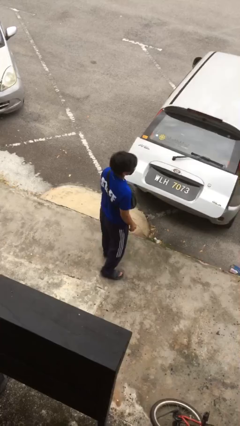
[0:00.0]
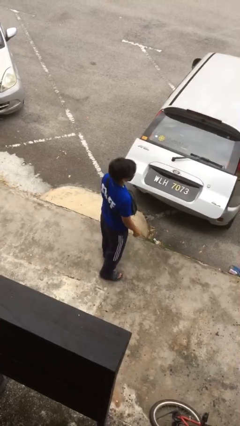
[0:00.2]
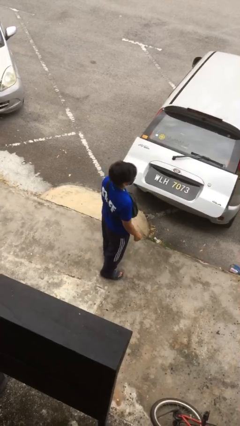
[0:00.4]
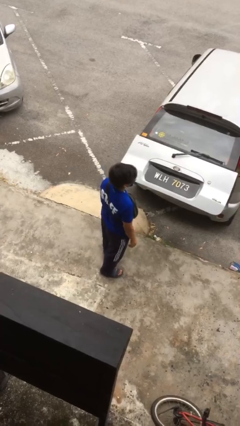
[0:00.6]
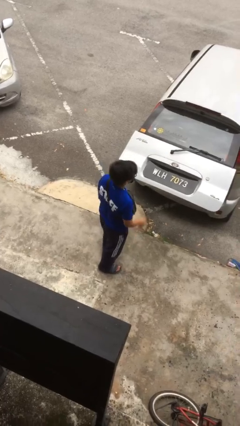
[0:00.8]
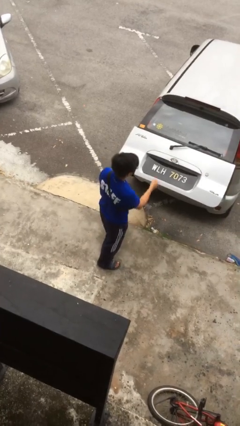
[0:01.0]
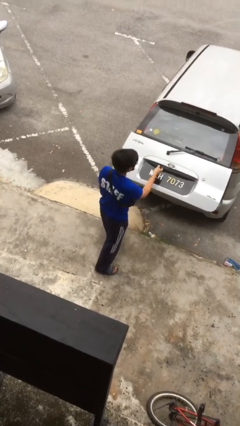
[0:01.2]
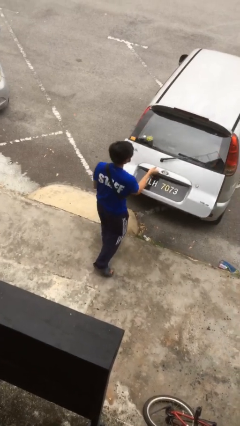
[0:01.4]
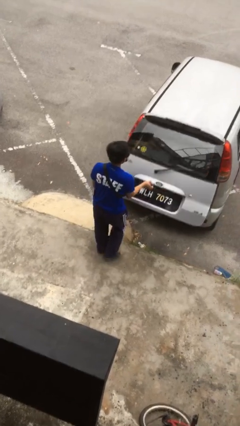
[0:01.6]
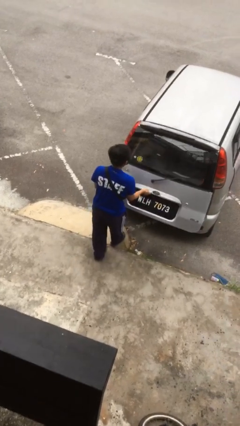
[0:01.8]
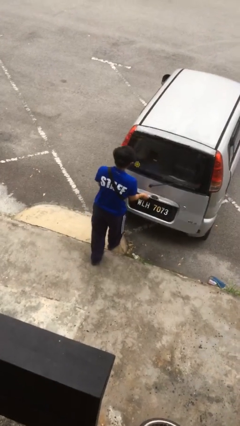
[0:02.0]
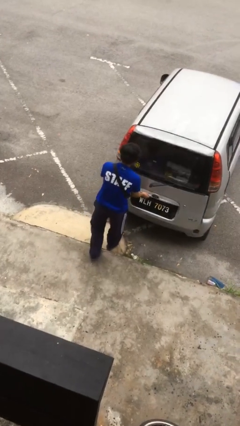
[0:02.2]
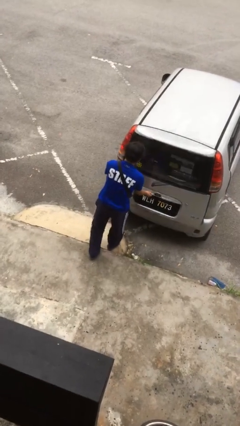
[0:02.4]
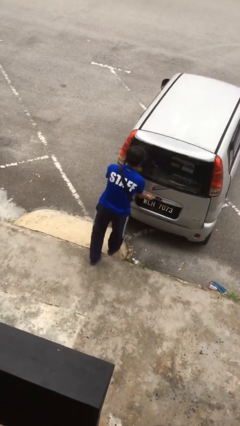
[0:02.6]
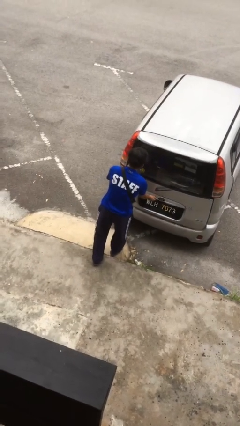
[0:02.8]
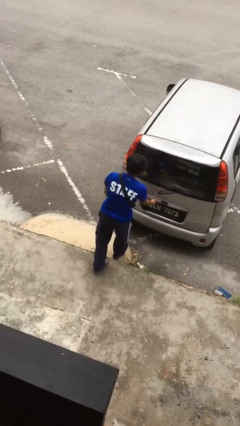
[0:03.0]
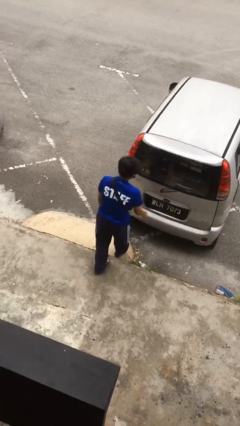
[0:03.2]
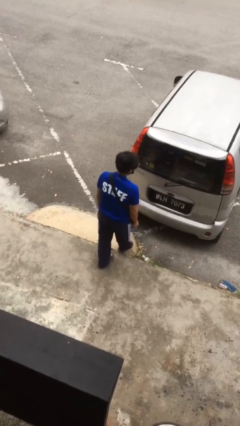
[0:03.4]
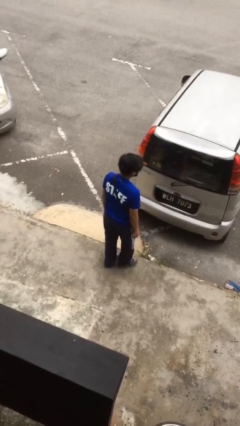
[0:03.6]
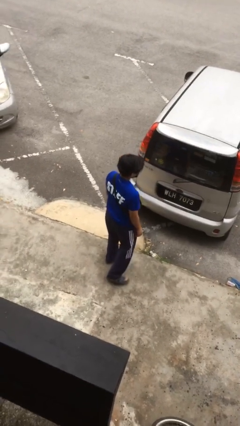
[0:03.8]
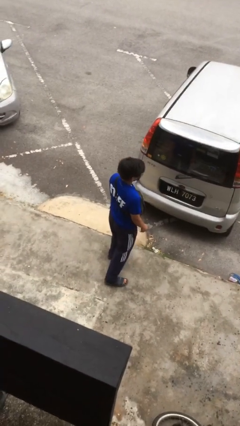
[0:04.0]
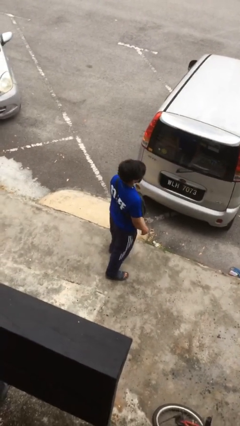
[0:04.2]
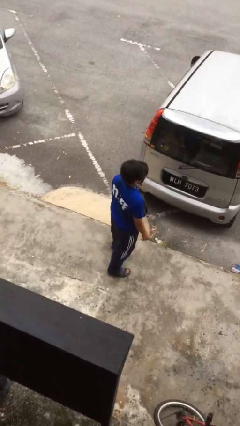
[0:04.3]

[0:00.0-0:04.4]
person closes car trunk

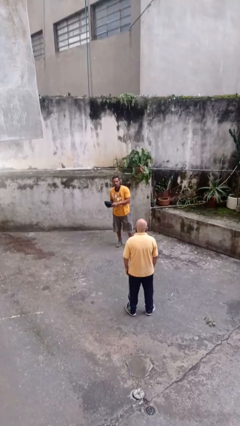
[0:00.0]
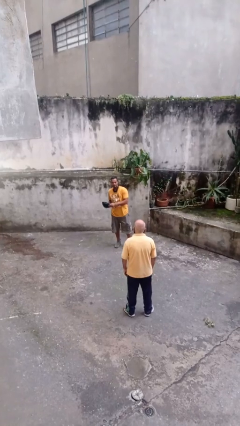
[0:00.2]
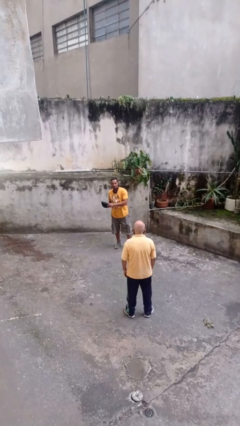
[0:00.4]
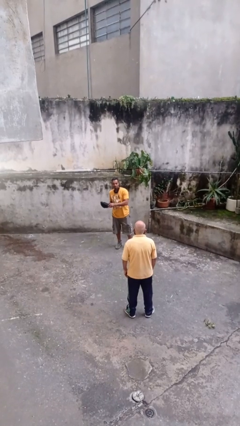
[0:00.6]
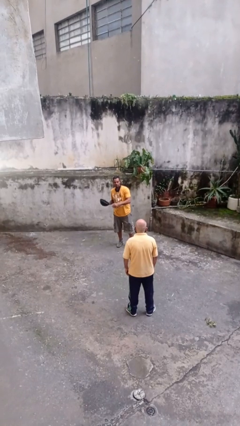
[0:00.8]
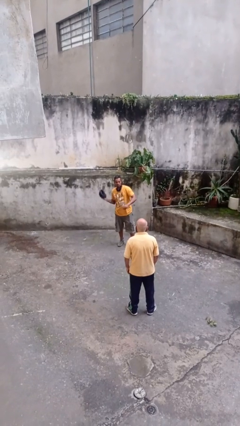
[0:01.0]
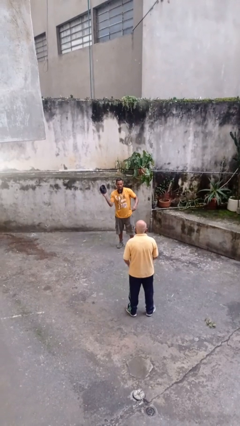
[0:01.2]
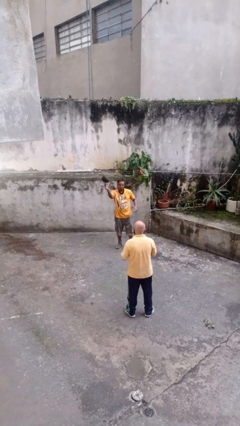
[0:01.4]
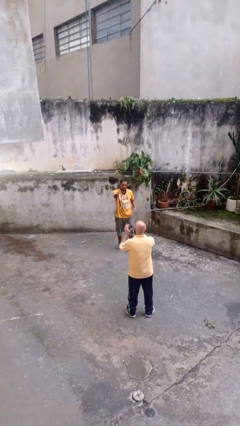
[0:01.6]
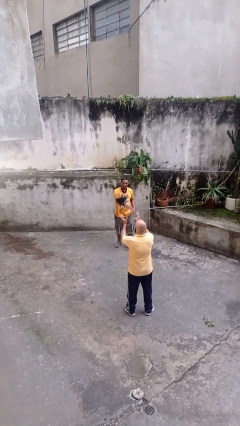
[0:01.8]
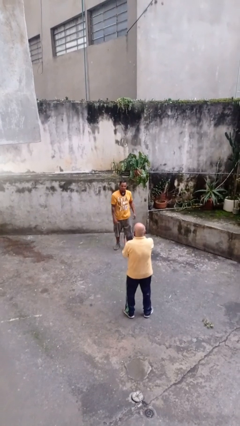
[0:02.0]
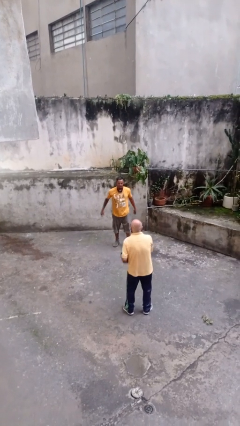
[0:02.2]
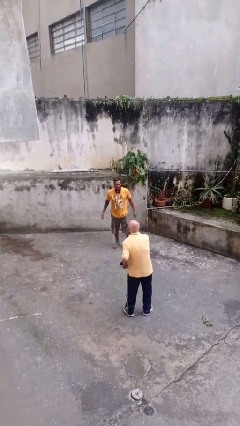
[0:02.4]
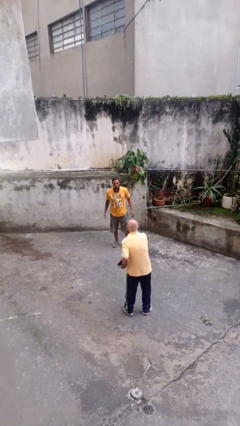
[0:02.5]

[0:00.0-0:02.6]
person throws object to person

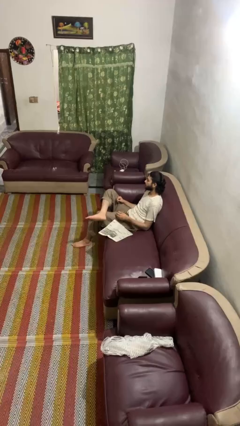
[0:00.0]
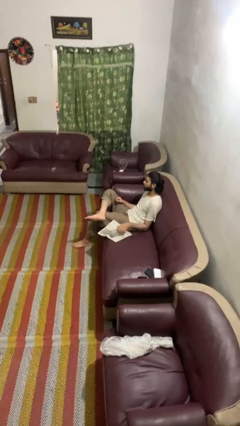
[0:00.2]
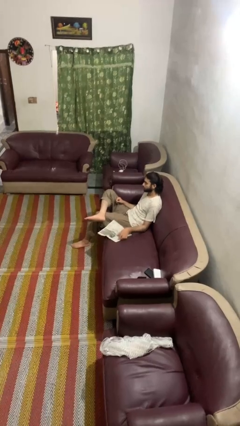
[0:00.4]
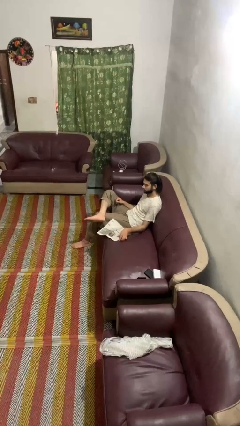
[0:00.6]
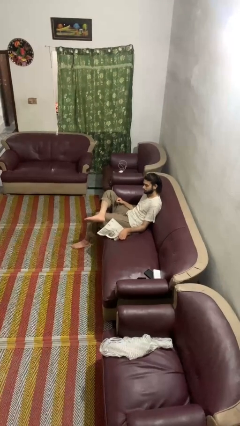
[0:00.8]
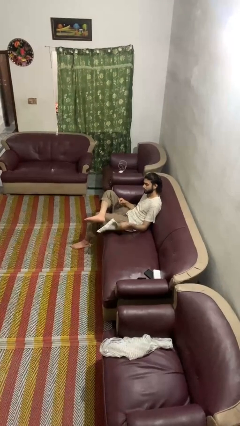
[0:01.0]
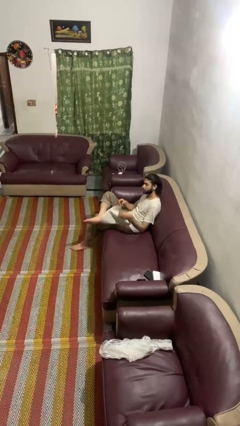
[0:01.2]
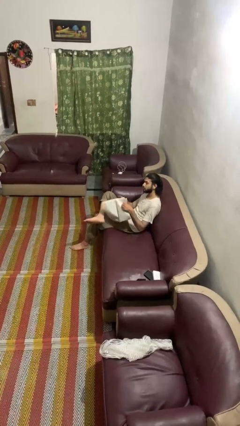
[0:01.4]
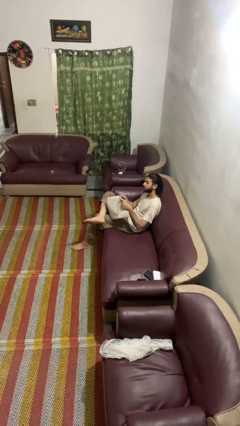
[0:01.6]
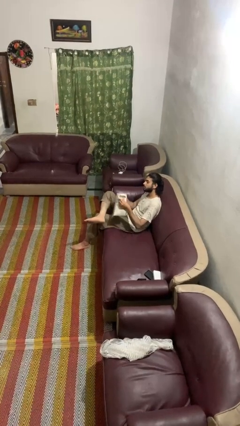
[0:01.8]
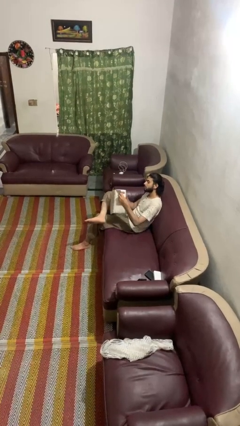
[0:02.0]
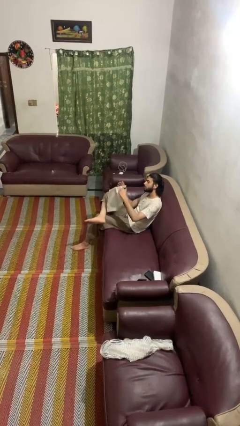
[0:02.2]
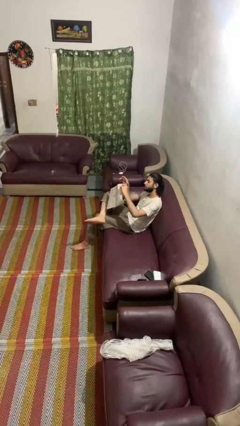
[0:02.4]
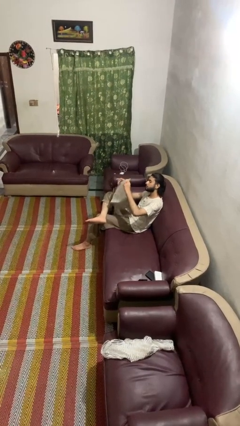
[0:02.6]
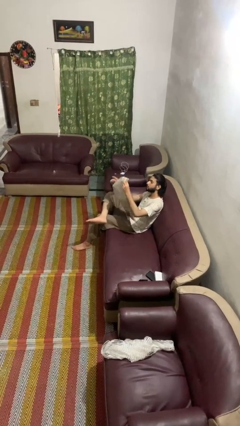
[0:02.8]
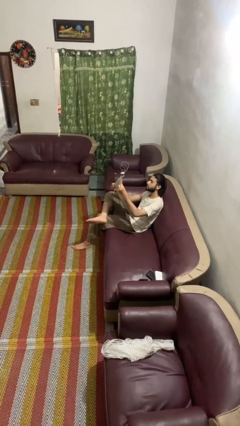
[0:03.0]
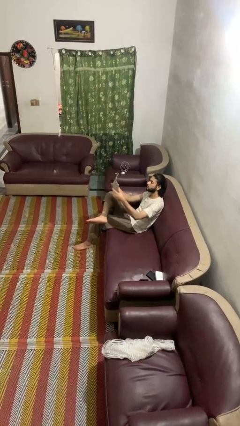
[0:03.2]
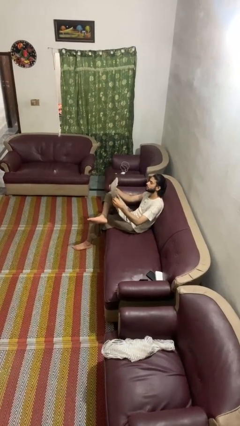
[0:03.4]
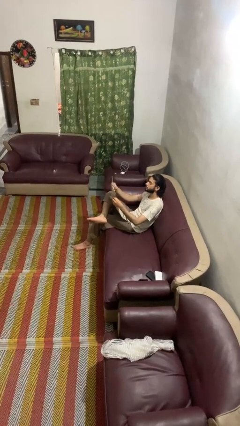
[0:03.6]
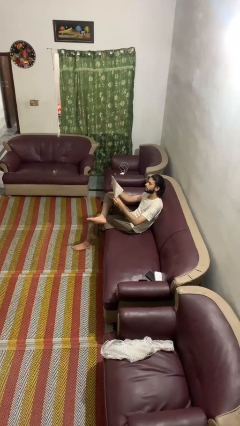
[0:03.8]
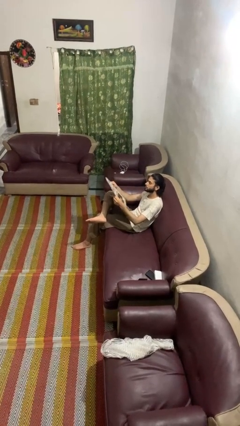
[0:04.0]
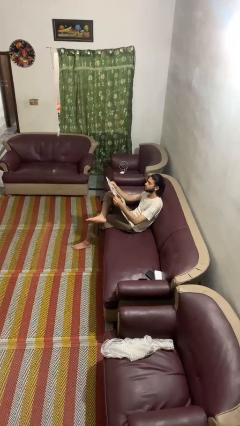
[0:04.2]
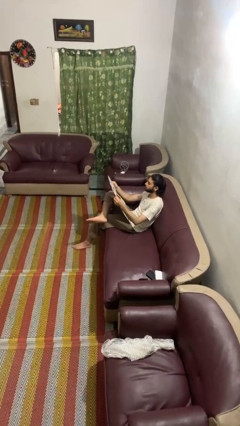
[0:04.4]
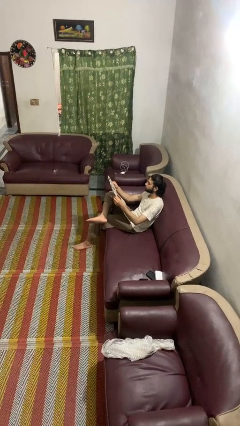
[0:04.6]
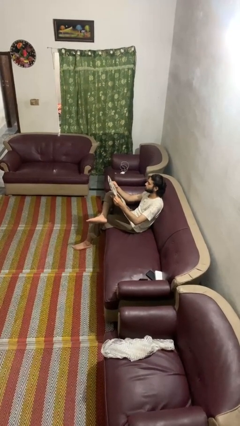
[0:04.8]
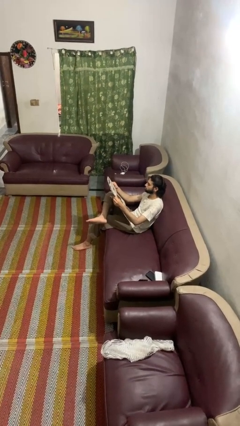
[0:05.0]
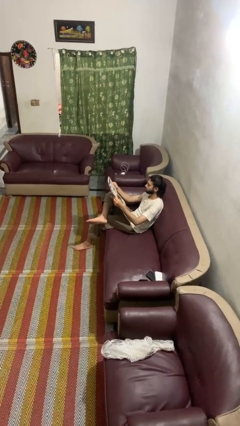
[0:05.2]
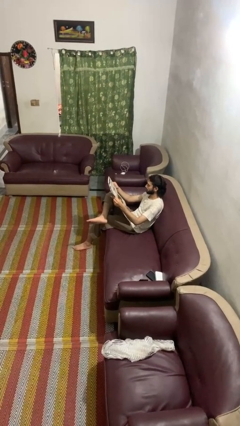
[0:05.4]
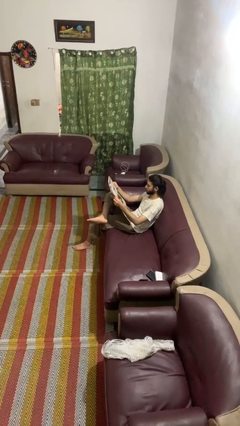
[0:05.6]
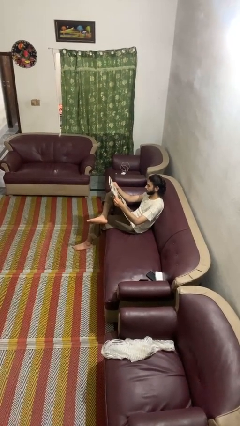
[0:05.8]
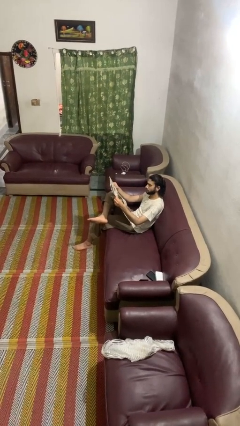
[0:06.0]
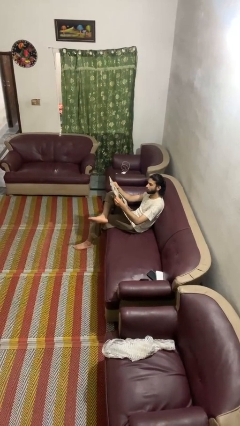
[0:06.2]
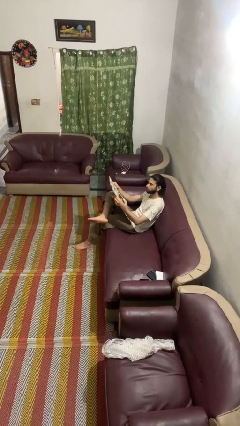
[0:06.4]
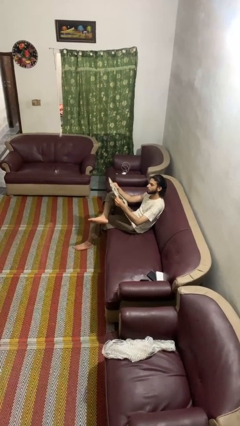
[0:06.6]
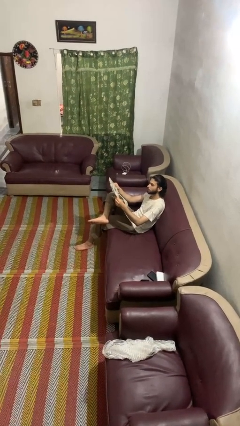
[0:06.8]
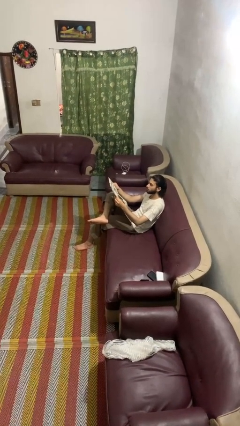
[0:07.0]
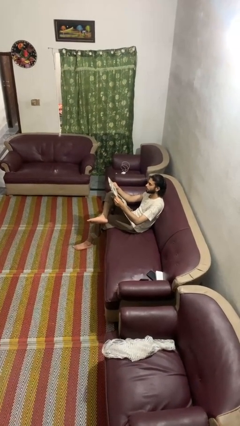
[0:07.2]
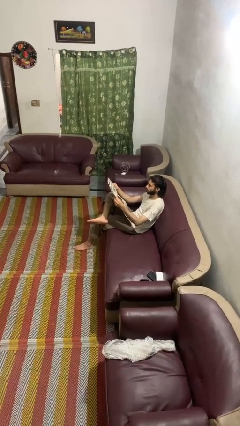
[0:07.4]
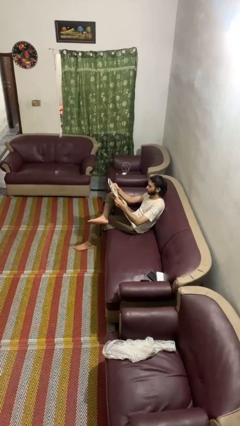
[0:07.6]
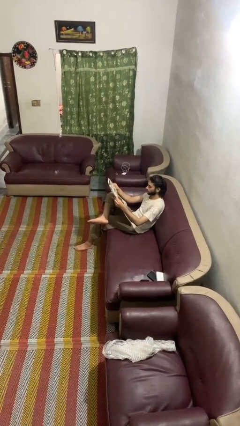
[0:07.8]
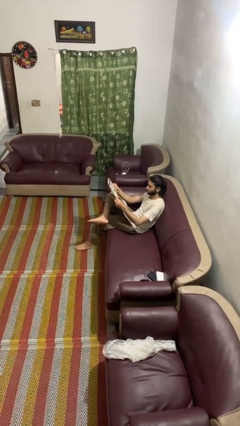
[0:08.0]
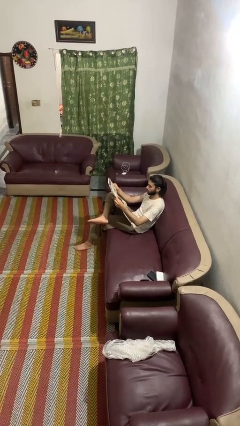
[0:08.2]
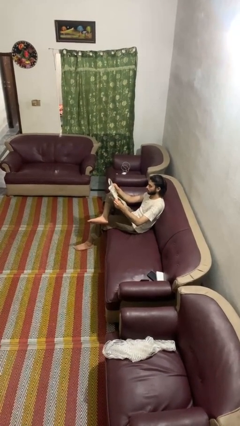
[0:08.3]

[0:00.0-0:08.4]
person reads newspaper

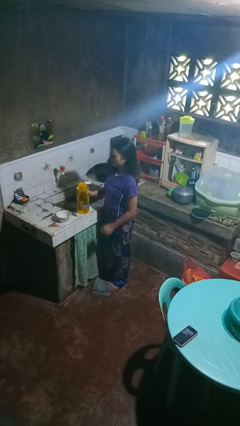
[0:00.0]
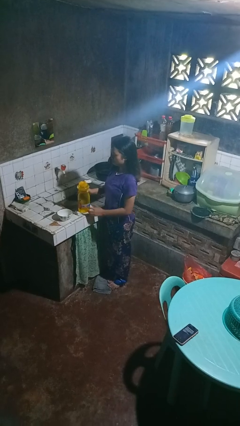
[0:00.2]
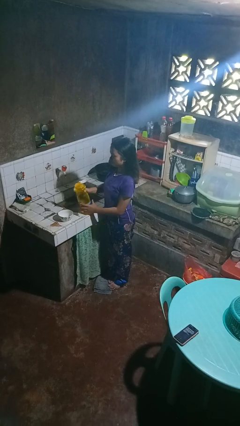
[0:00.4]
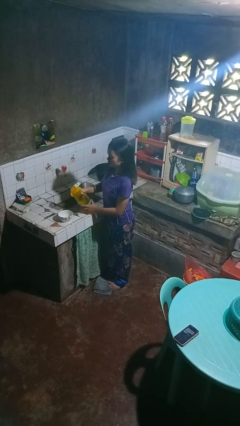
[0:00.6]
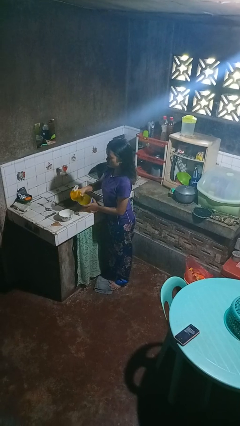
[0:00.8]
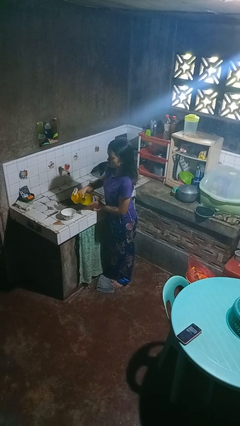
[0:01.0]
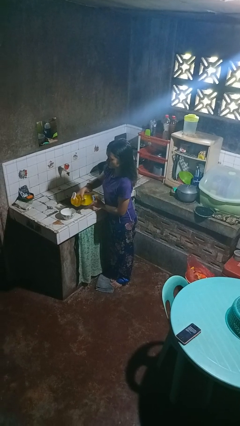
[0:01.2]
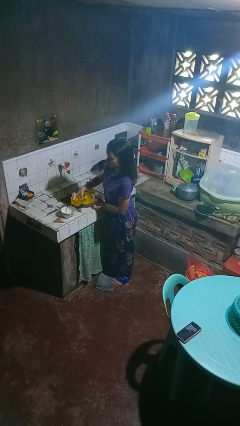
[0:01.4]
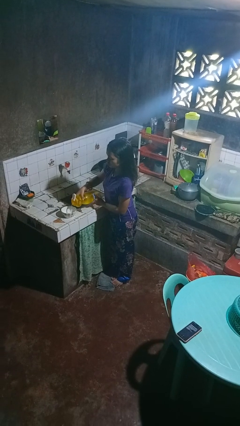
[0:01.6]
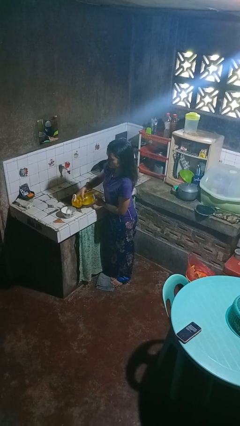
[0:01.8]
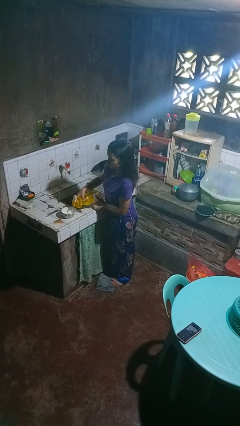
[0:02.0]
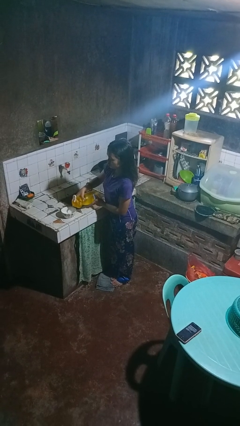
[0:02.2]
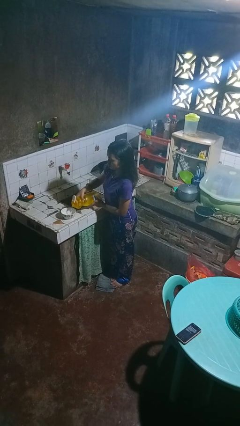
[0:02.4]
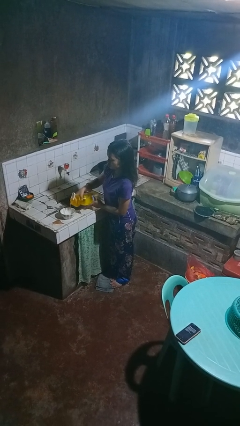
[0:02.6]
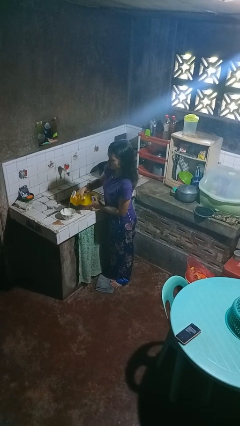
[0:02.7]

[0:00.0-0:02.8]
person pours into bowl
